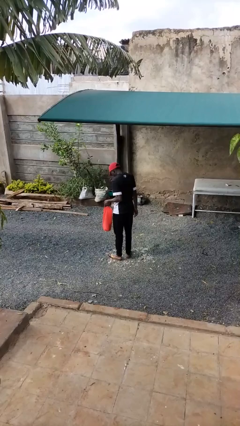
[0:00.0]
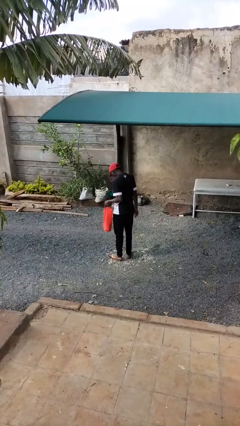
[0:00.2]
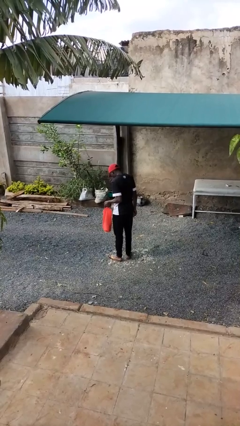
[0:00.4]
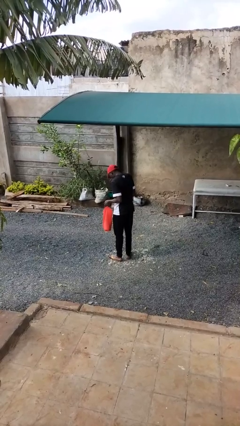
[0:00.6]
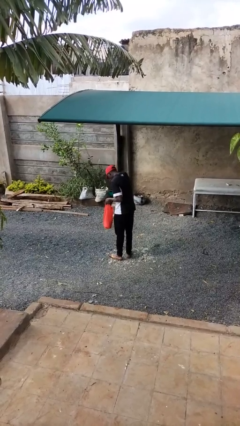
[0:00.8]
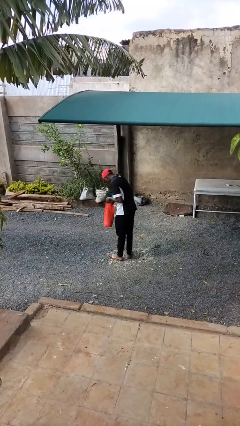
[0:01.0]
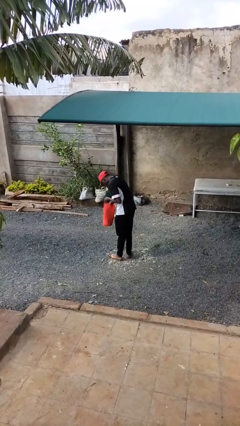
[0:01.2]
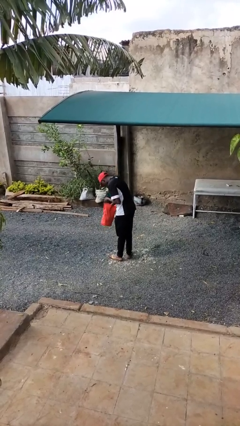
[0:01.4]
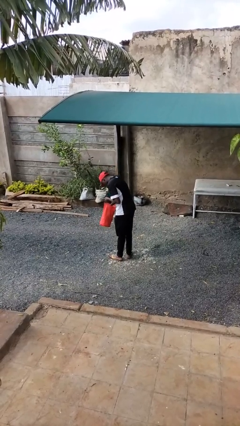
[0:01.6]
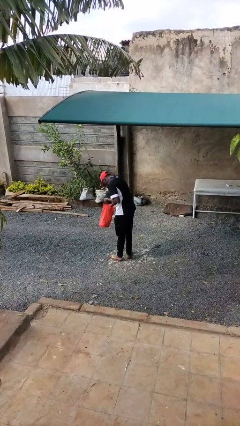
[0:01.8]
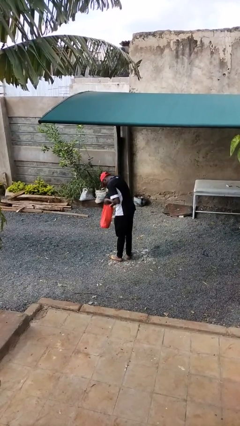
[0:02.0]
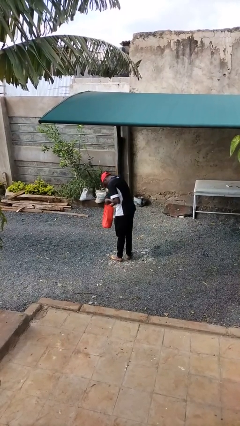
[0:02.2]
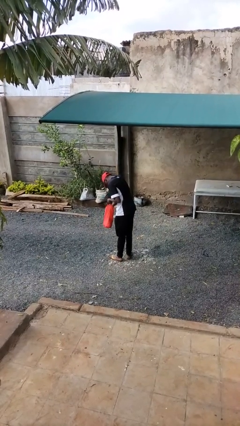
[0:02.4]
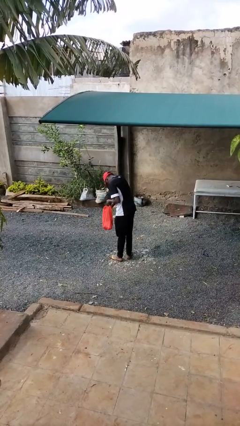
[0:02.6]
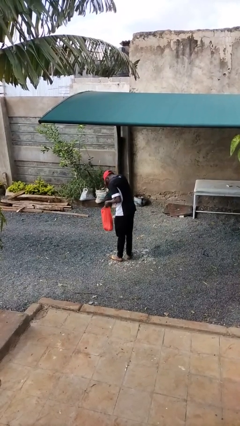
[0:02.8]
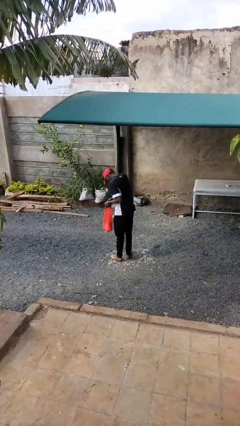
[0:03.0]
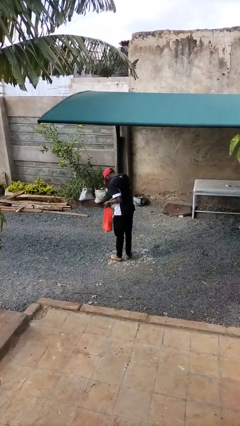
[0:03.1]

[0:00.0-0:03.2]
person searches in bag

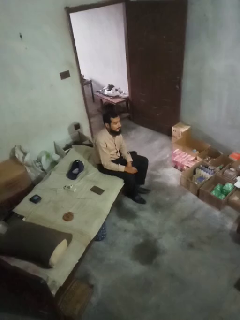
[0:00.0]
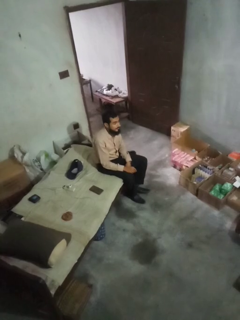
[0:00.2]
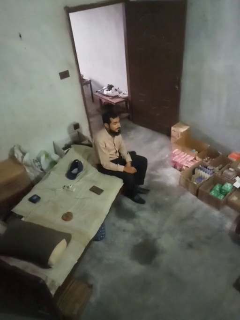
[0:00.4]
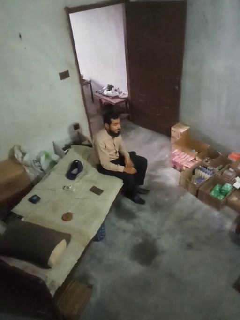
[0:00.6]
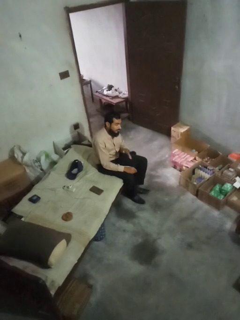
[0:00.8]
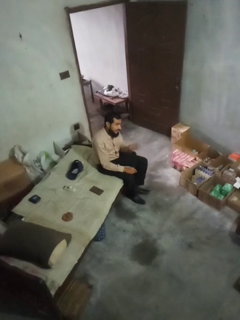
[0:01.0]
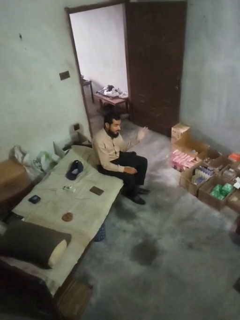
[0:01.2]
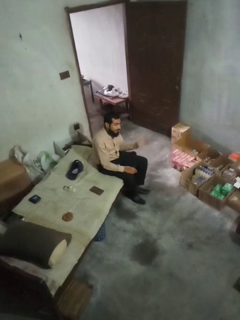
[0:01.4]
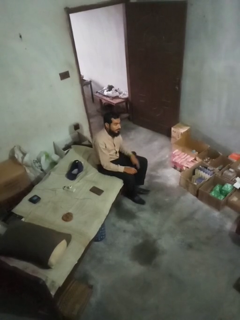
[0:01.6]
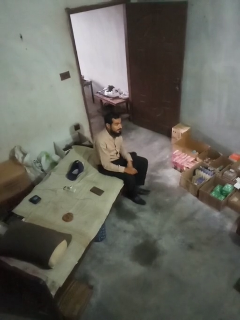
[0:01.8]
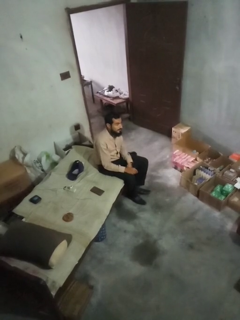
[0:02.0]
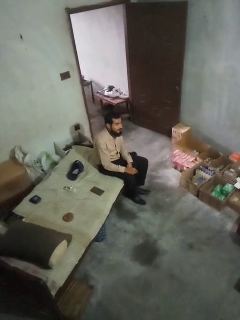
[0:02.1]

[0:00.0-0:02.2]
person gestures swipe left

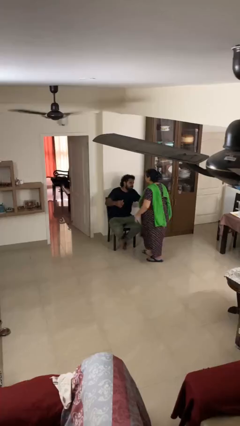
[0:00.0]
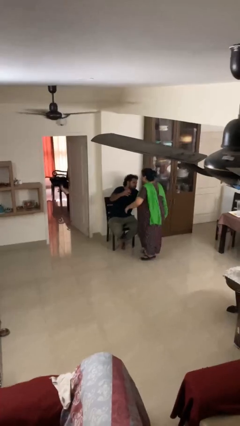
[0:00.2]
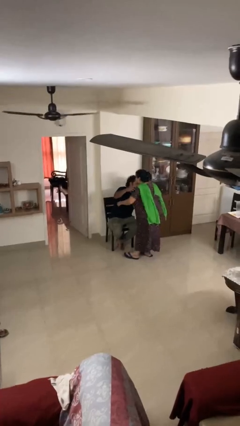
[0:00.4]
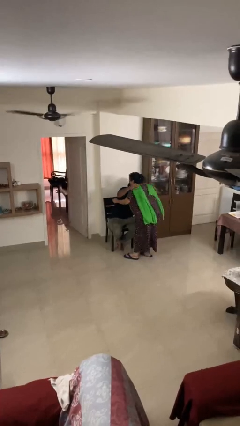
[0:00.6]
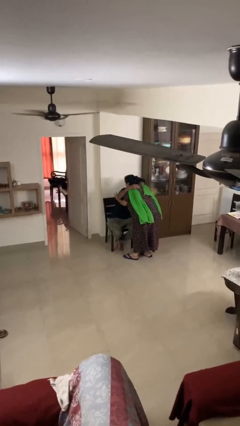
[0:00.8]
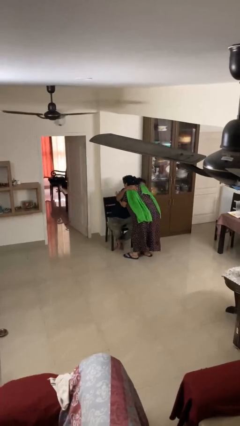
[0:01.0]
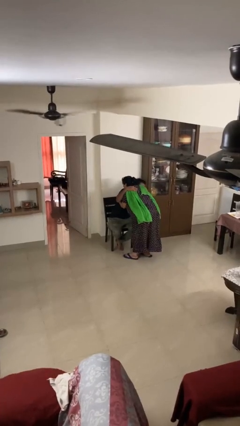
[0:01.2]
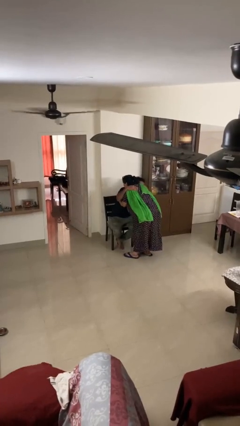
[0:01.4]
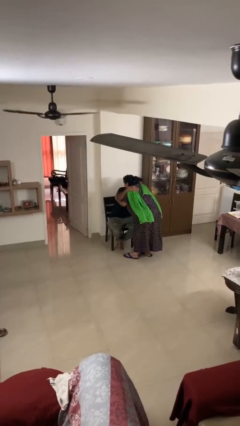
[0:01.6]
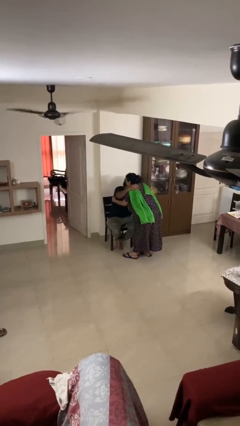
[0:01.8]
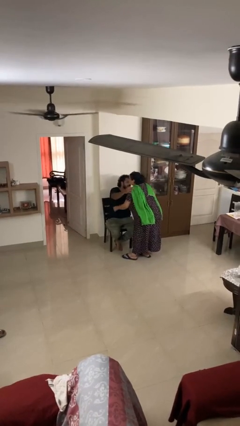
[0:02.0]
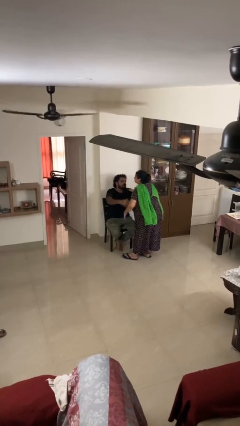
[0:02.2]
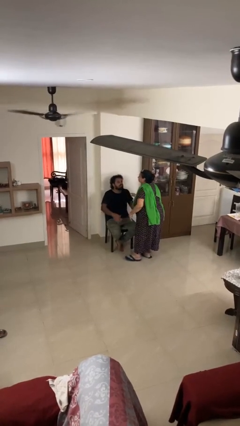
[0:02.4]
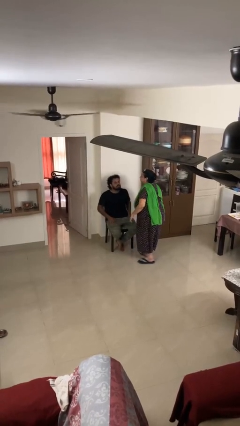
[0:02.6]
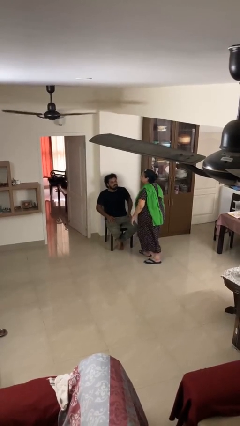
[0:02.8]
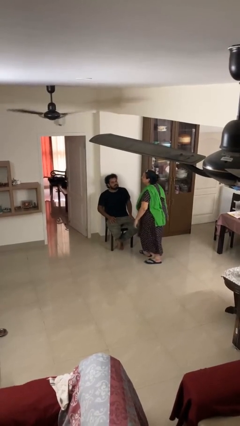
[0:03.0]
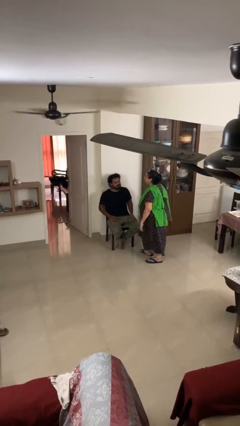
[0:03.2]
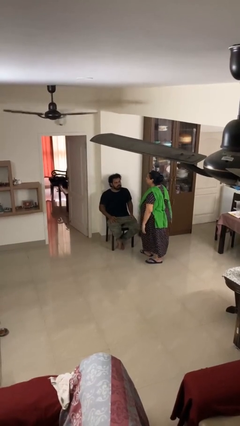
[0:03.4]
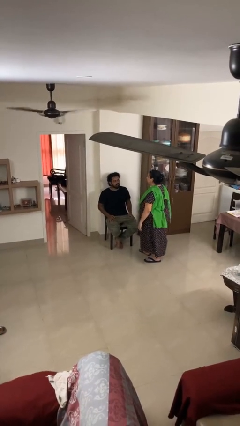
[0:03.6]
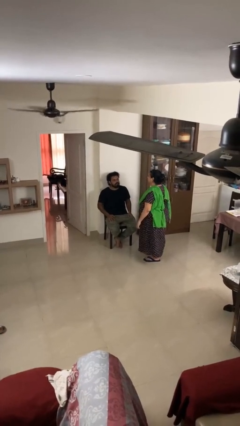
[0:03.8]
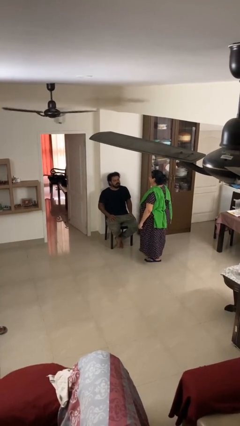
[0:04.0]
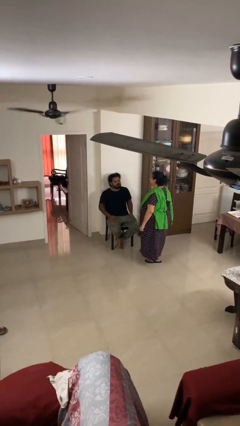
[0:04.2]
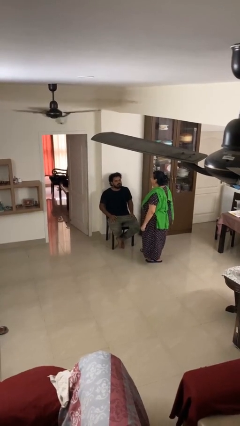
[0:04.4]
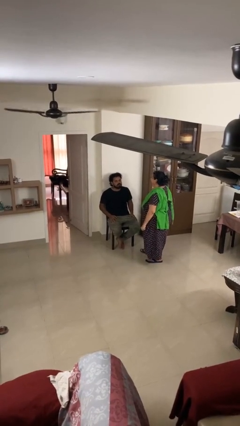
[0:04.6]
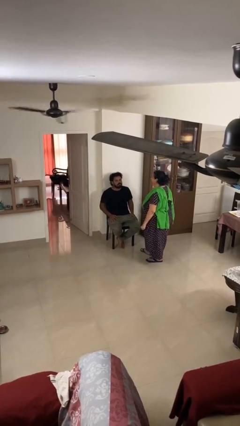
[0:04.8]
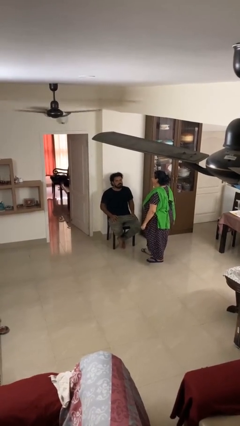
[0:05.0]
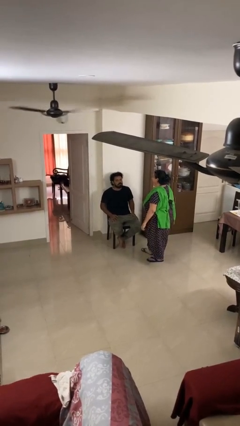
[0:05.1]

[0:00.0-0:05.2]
person embraces person

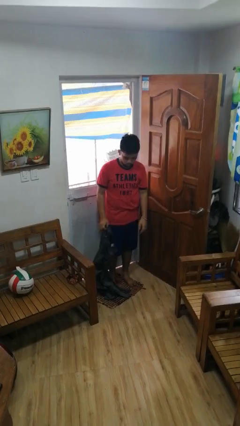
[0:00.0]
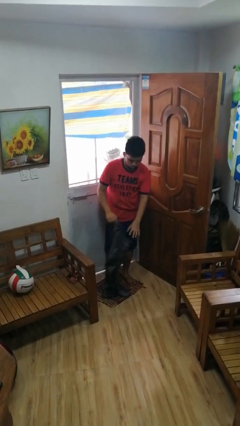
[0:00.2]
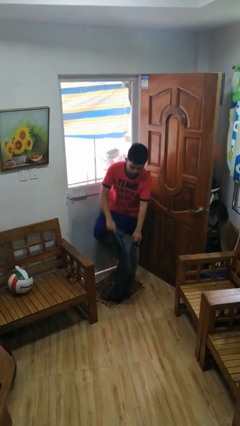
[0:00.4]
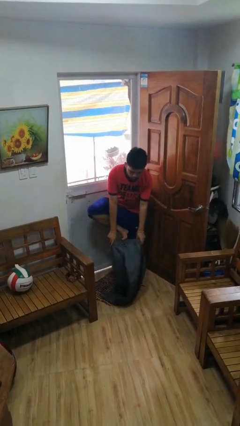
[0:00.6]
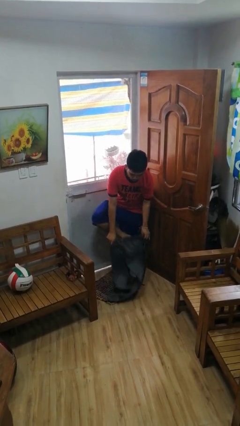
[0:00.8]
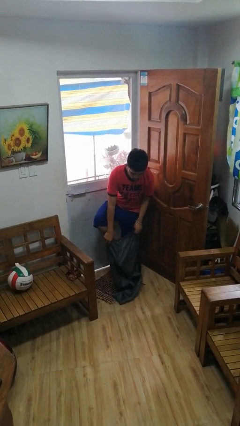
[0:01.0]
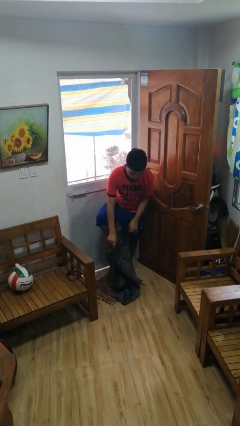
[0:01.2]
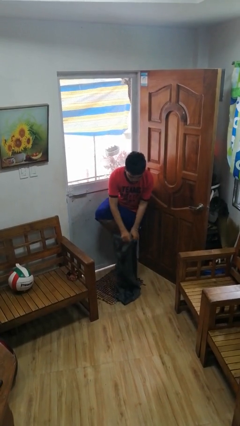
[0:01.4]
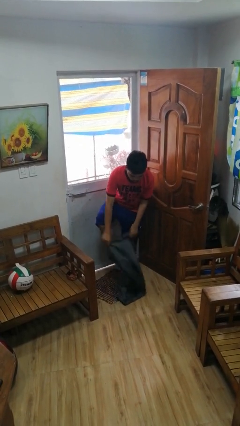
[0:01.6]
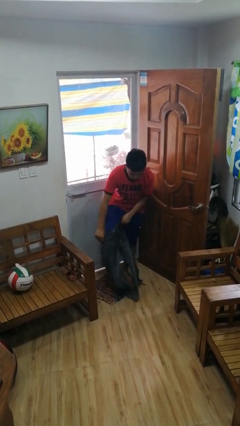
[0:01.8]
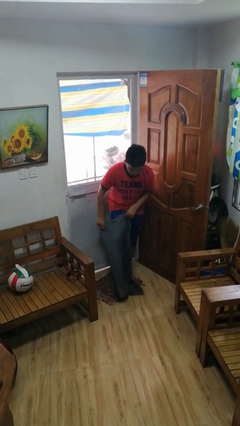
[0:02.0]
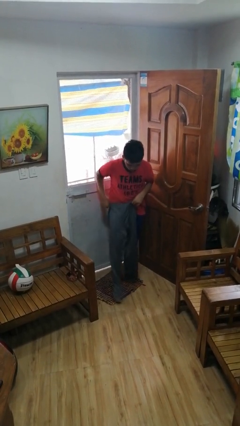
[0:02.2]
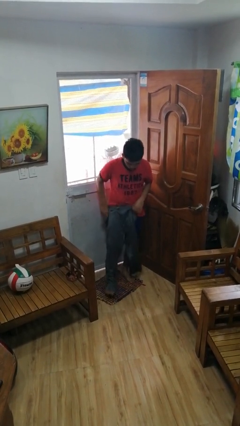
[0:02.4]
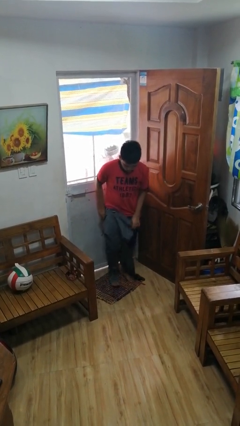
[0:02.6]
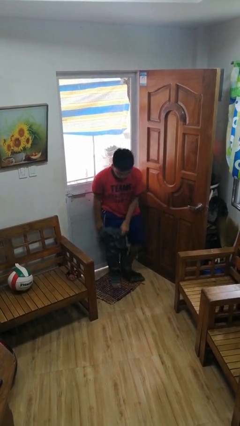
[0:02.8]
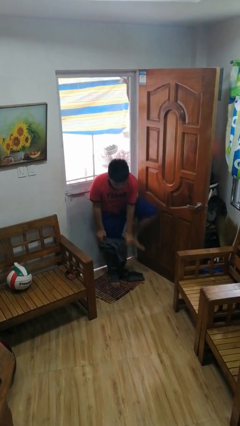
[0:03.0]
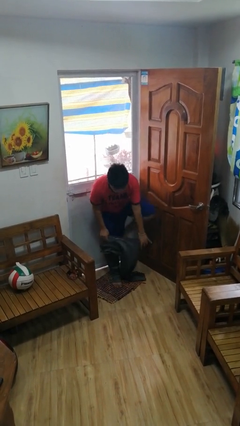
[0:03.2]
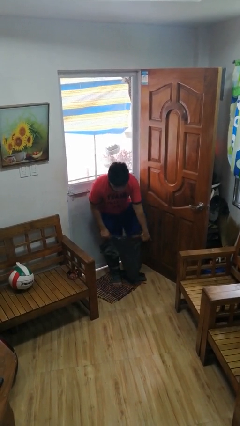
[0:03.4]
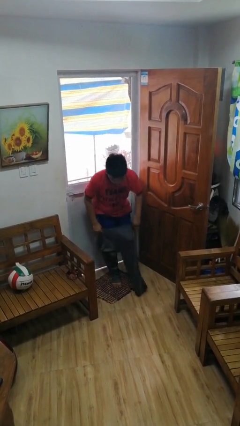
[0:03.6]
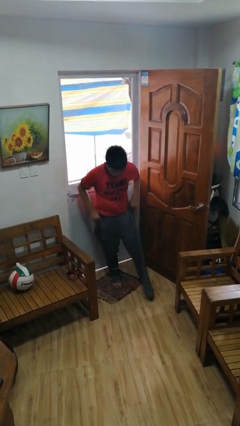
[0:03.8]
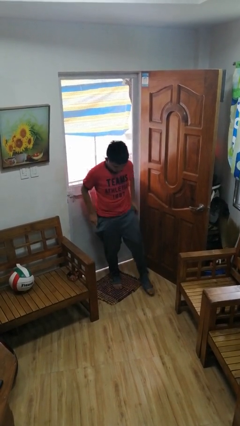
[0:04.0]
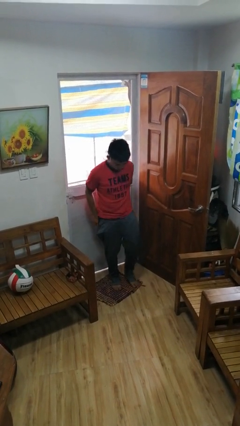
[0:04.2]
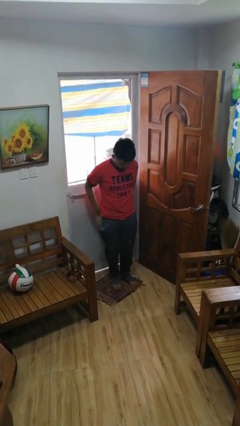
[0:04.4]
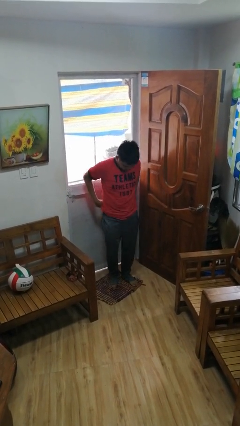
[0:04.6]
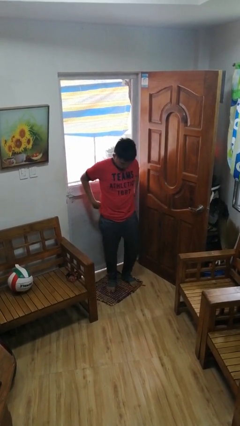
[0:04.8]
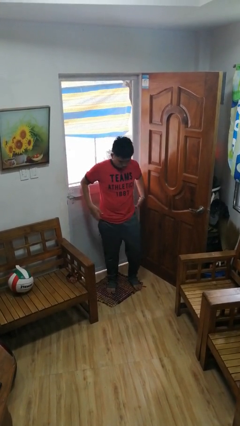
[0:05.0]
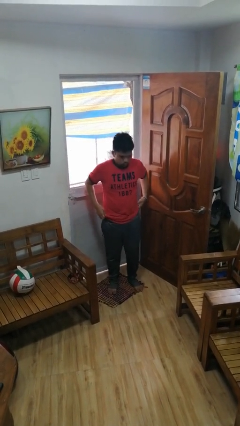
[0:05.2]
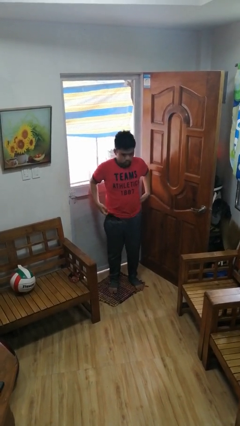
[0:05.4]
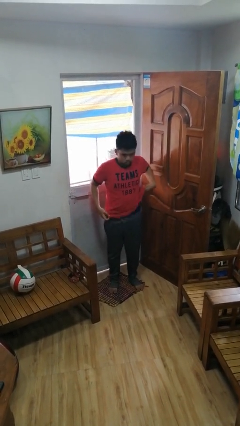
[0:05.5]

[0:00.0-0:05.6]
person puts on pants

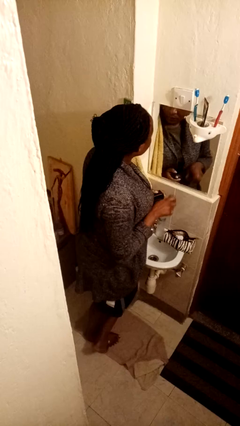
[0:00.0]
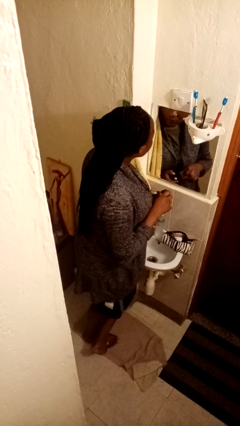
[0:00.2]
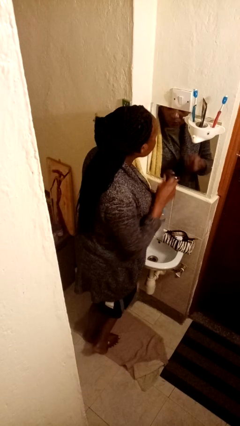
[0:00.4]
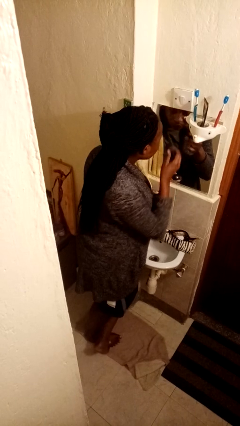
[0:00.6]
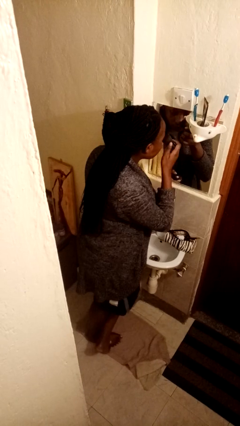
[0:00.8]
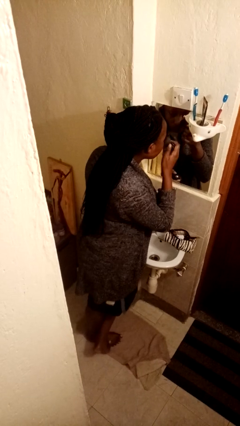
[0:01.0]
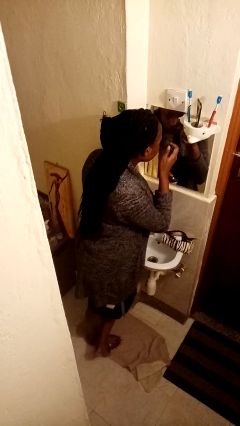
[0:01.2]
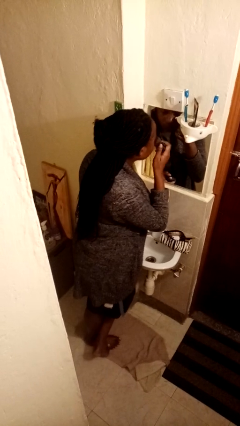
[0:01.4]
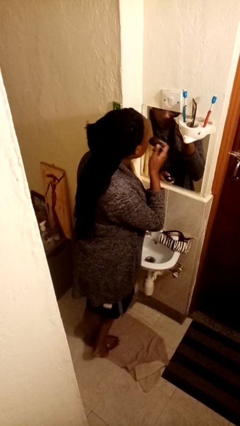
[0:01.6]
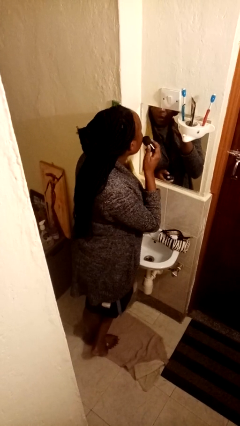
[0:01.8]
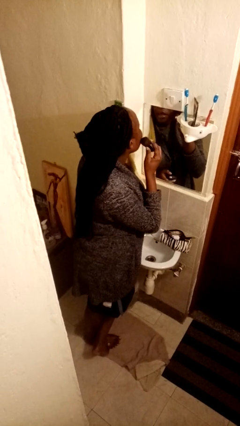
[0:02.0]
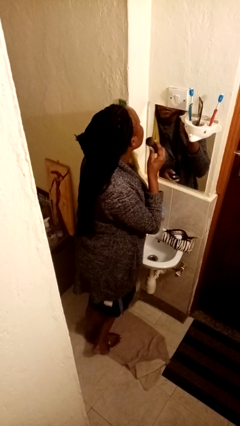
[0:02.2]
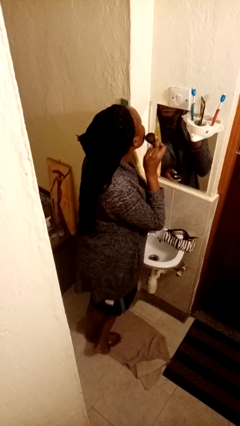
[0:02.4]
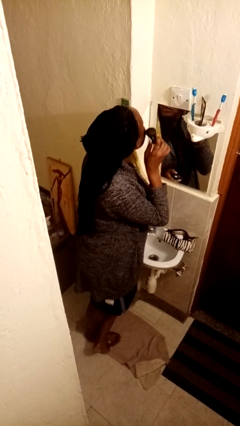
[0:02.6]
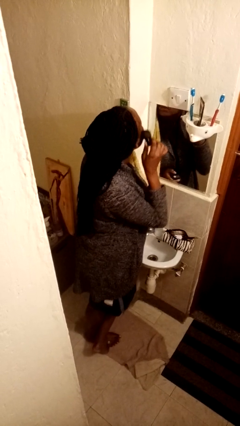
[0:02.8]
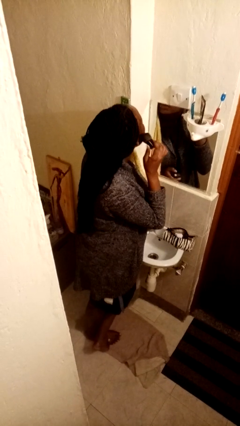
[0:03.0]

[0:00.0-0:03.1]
person applies foundation makeup
